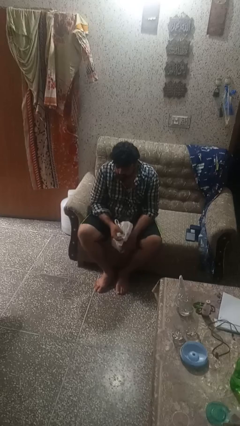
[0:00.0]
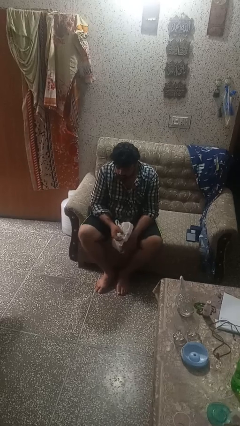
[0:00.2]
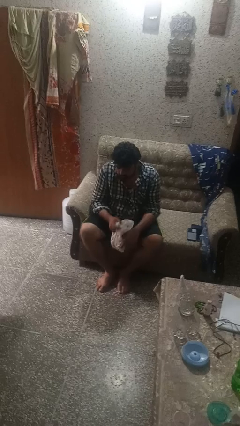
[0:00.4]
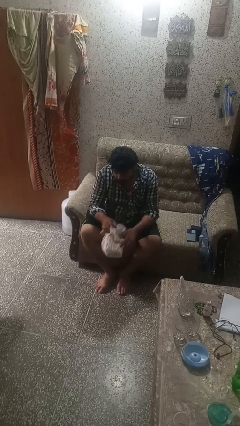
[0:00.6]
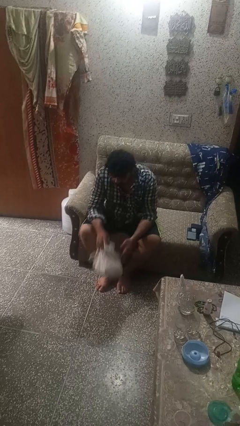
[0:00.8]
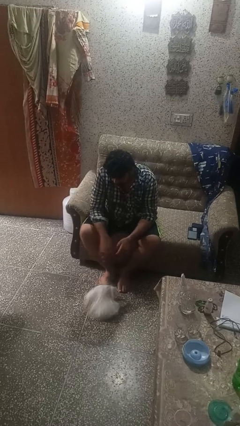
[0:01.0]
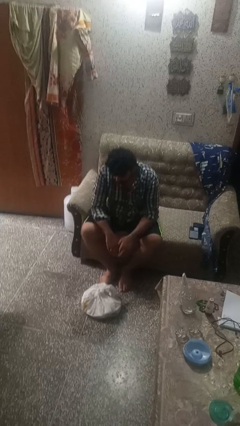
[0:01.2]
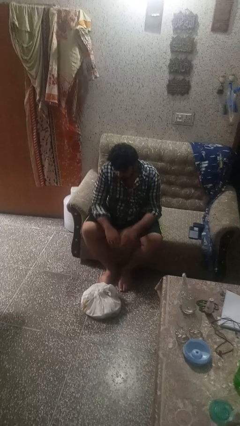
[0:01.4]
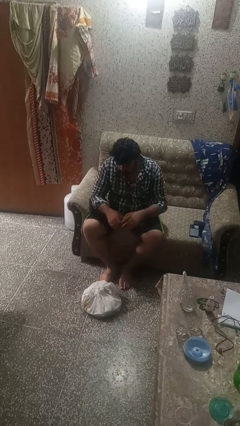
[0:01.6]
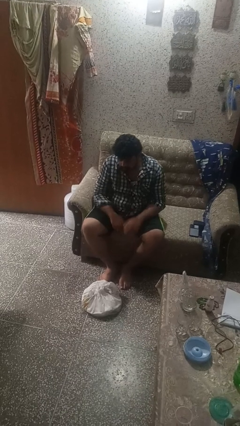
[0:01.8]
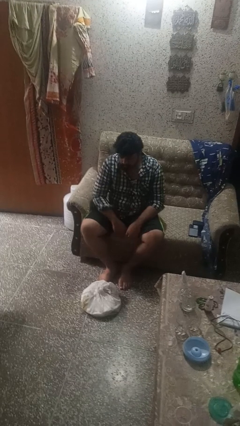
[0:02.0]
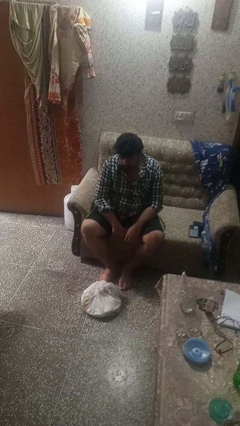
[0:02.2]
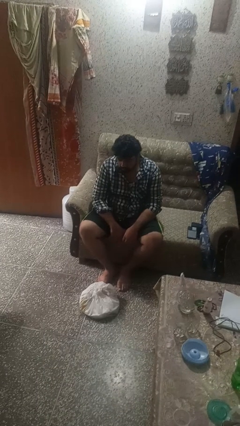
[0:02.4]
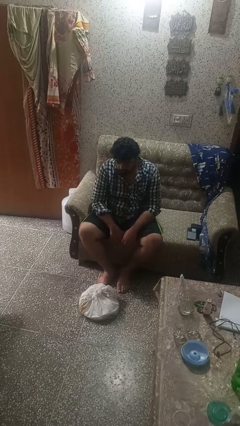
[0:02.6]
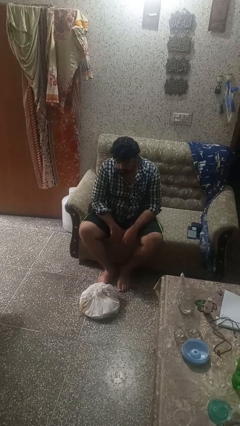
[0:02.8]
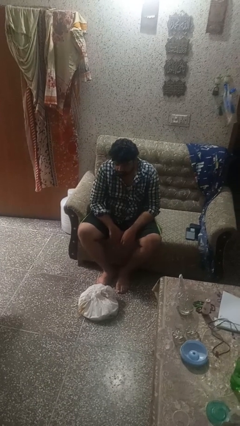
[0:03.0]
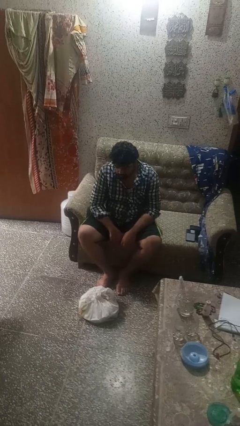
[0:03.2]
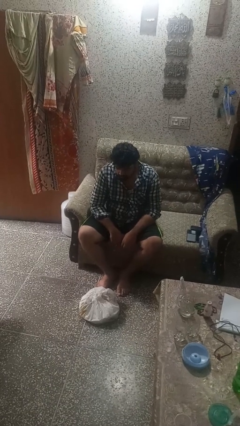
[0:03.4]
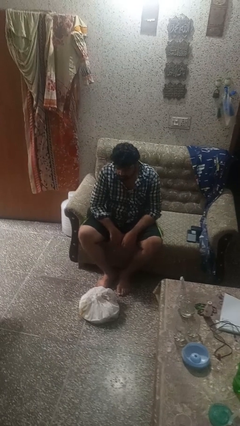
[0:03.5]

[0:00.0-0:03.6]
person throws object to ground

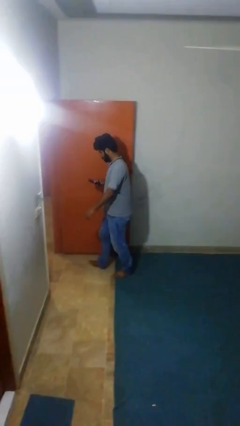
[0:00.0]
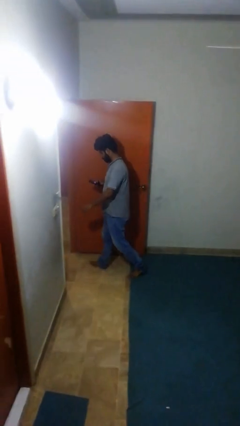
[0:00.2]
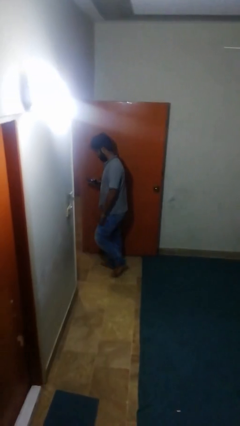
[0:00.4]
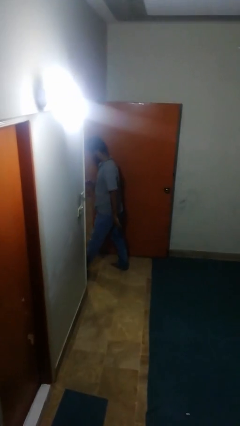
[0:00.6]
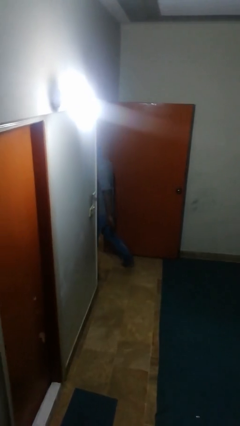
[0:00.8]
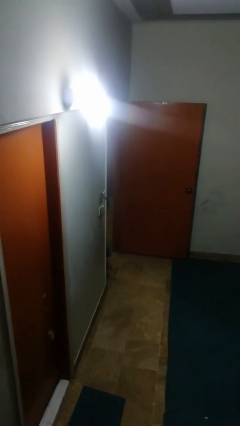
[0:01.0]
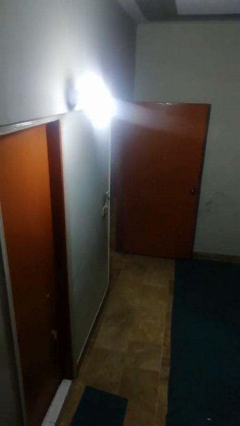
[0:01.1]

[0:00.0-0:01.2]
person exits scene through structure

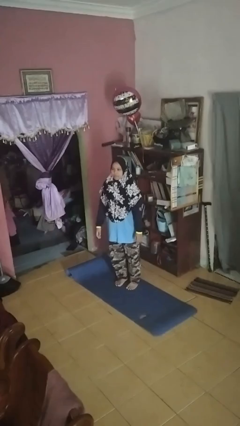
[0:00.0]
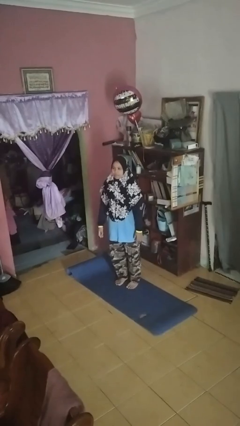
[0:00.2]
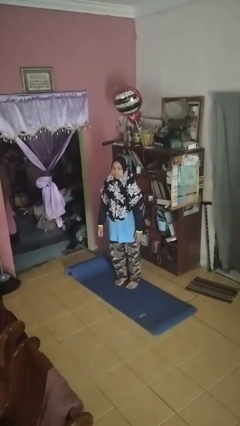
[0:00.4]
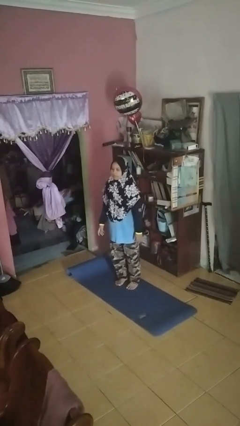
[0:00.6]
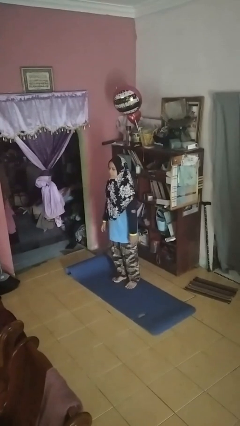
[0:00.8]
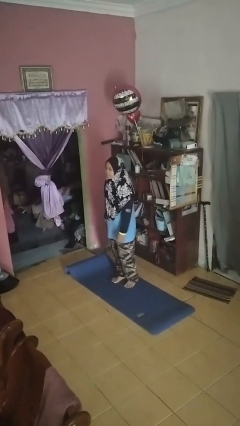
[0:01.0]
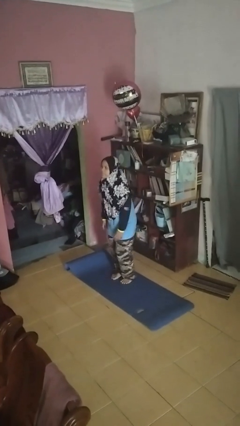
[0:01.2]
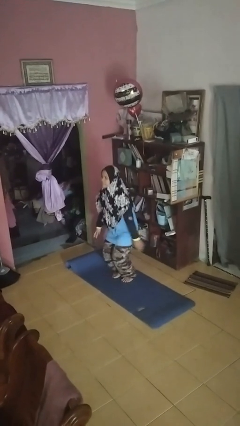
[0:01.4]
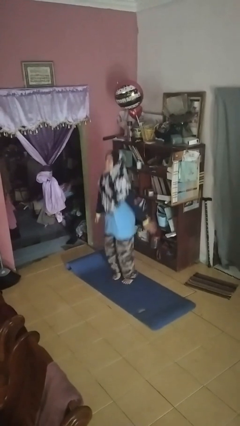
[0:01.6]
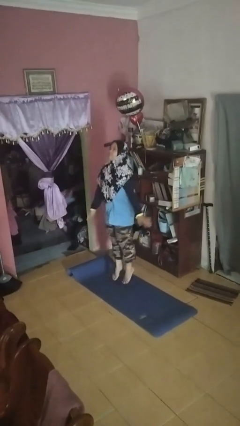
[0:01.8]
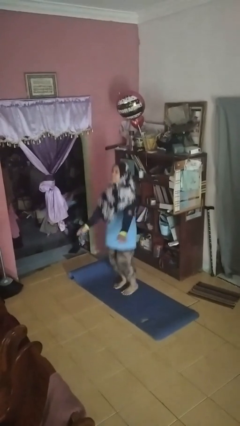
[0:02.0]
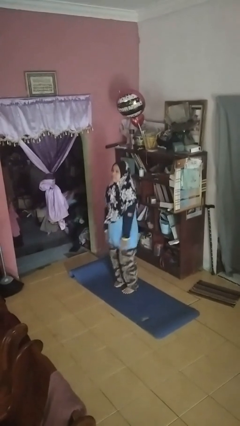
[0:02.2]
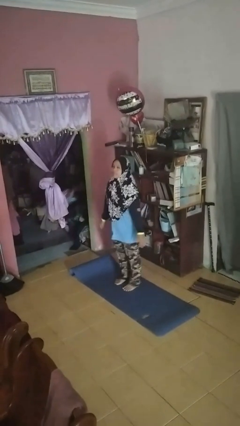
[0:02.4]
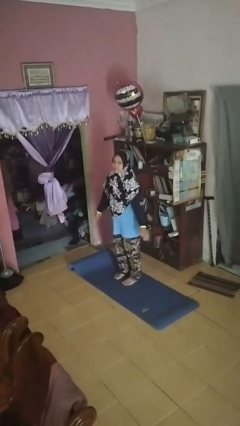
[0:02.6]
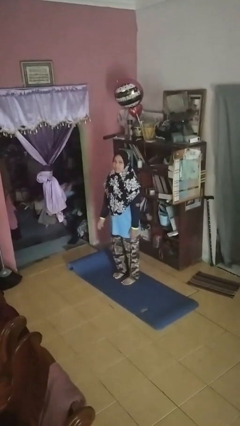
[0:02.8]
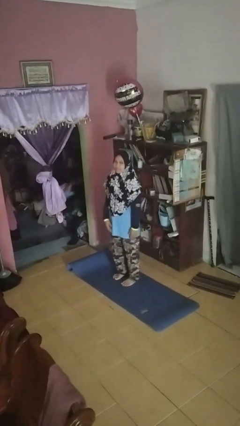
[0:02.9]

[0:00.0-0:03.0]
person jumps

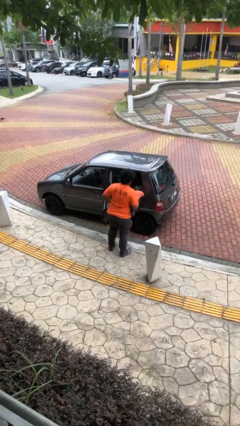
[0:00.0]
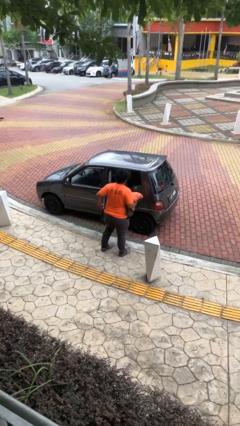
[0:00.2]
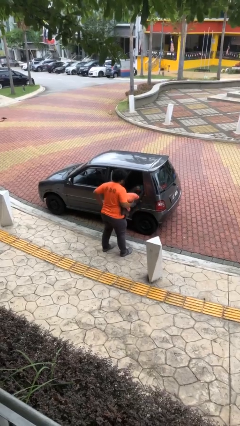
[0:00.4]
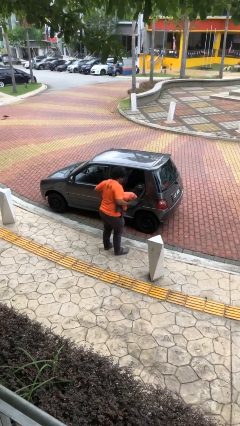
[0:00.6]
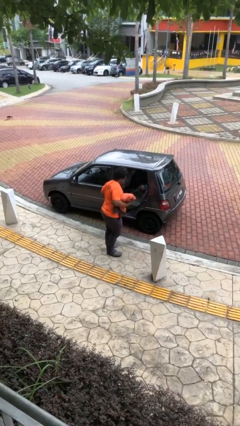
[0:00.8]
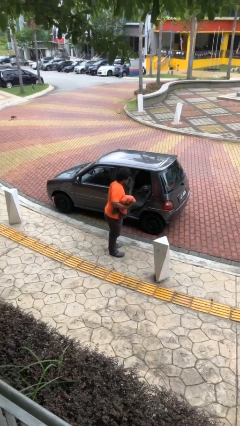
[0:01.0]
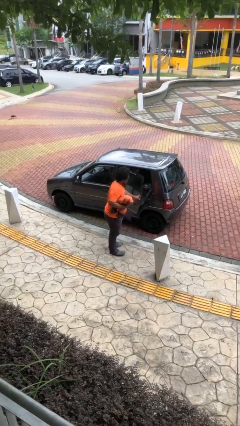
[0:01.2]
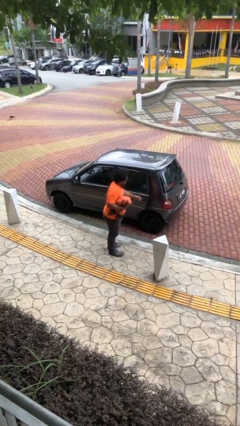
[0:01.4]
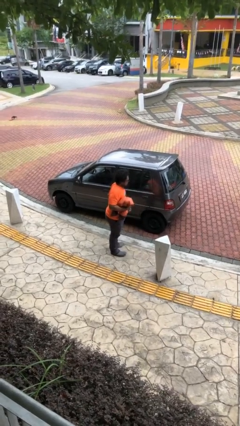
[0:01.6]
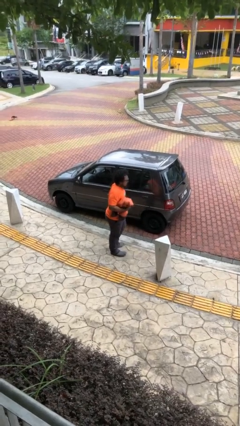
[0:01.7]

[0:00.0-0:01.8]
person closes car door

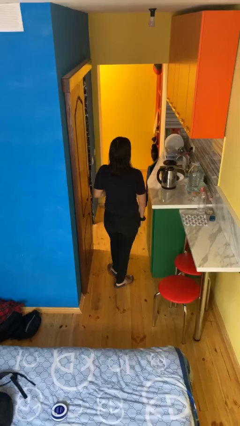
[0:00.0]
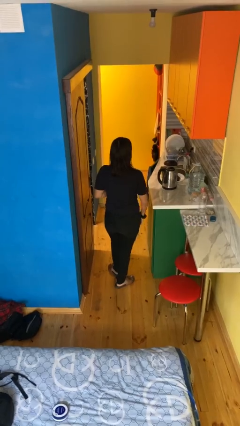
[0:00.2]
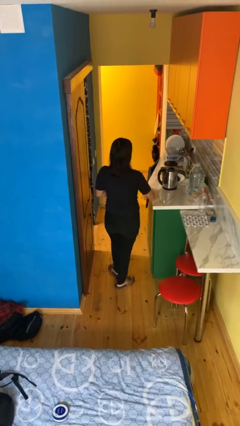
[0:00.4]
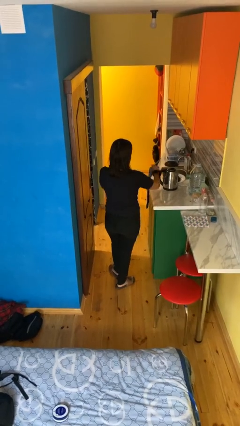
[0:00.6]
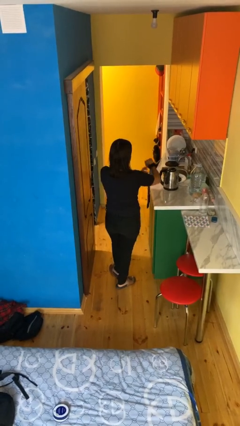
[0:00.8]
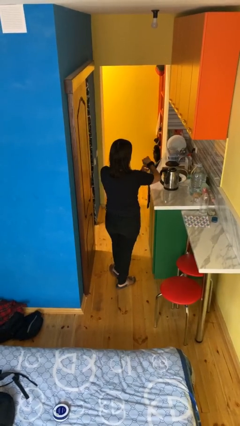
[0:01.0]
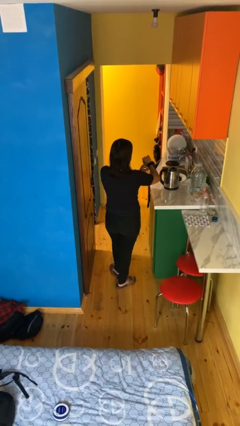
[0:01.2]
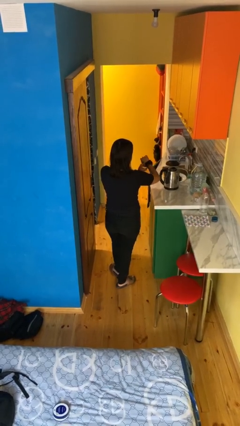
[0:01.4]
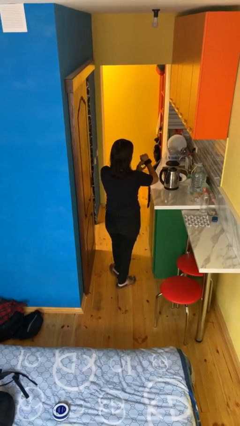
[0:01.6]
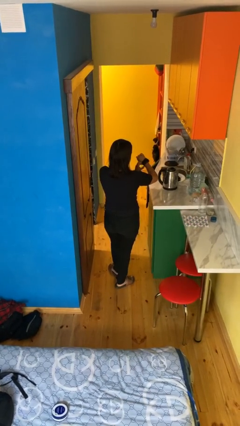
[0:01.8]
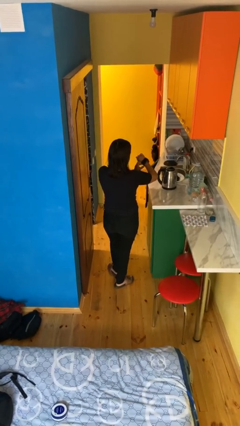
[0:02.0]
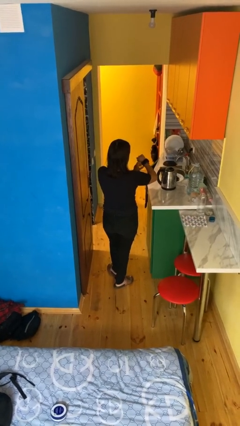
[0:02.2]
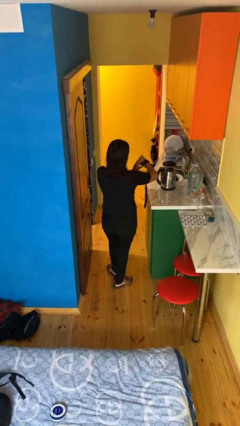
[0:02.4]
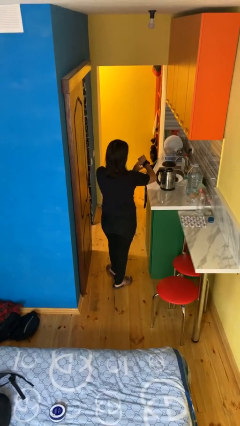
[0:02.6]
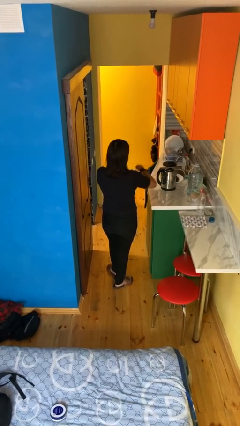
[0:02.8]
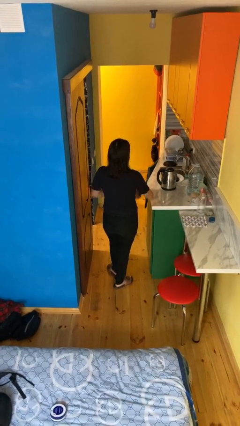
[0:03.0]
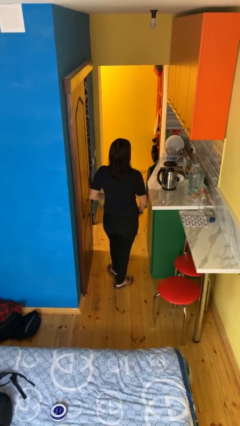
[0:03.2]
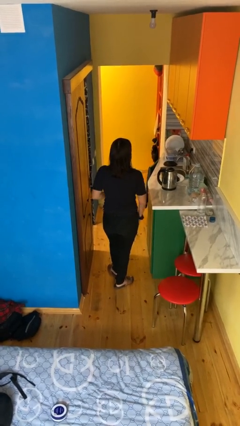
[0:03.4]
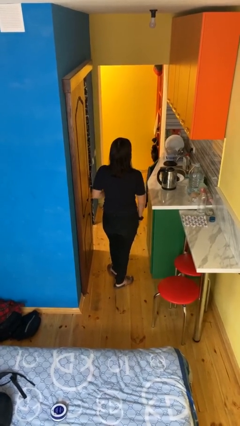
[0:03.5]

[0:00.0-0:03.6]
person looks at wristwatch

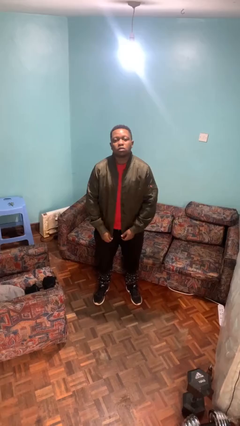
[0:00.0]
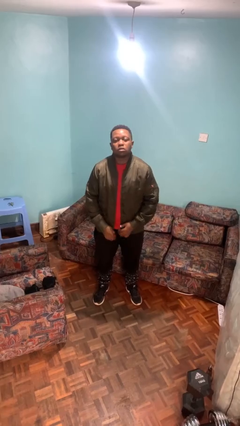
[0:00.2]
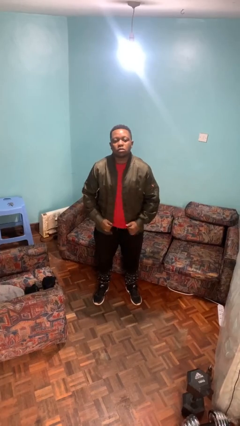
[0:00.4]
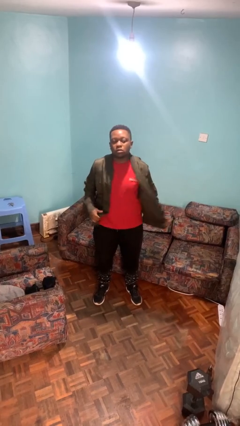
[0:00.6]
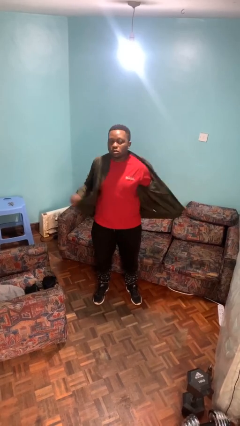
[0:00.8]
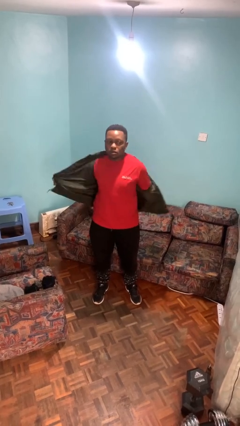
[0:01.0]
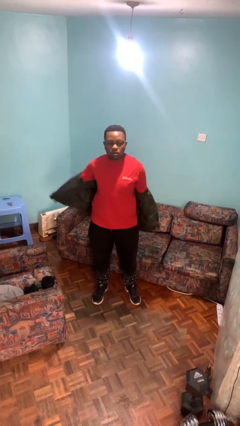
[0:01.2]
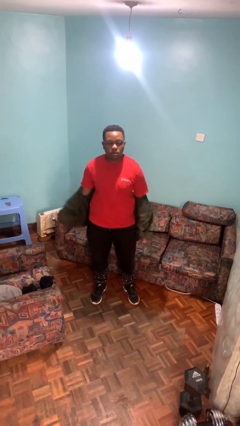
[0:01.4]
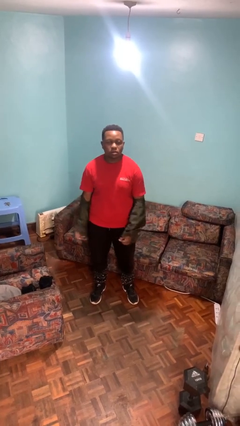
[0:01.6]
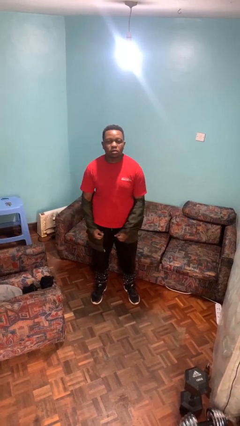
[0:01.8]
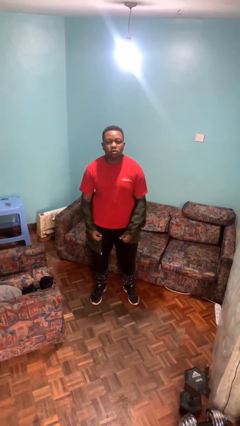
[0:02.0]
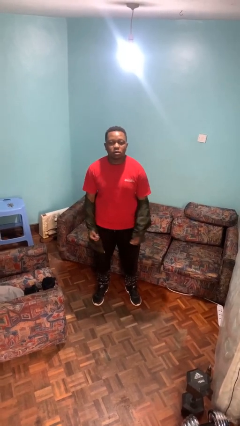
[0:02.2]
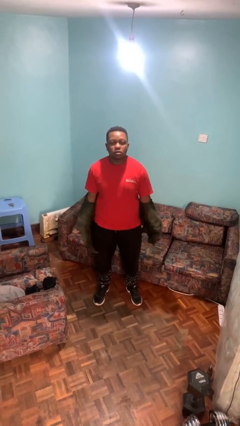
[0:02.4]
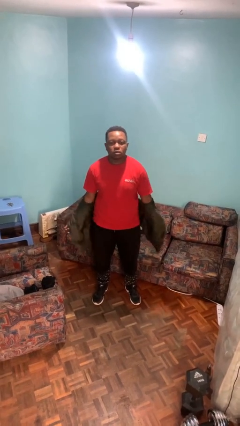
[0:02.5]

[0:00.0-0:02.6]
person takes off jacket

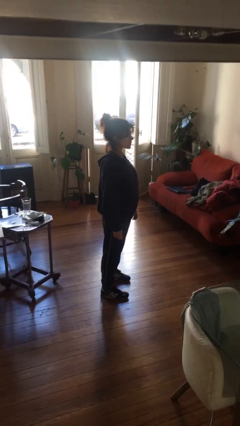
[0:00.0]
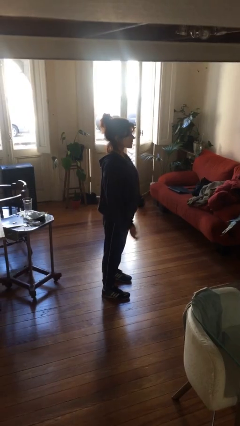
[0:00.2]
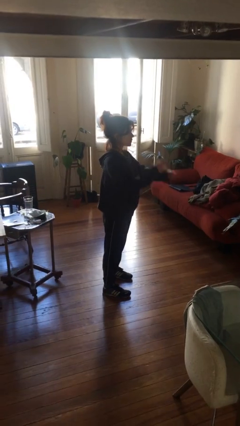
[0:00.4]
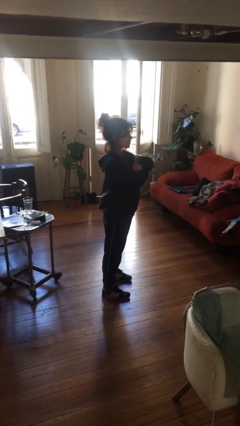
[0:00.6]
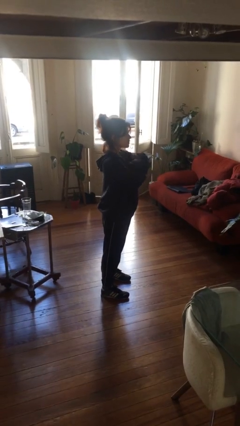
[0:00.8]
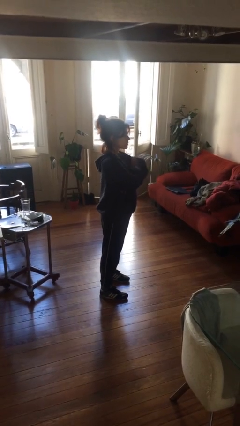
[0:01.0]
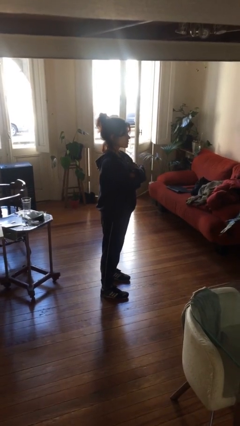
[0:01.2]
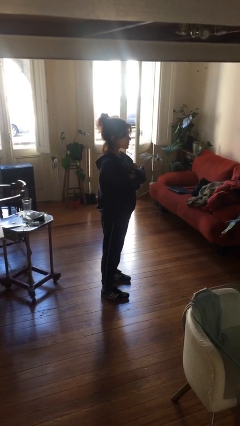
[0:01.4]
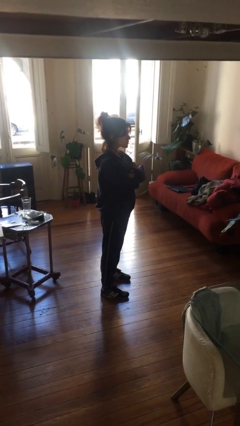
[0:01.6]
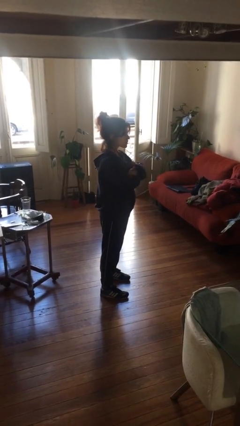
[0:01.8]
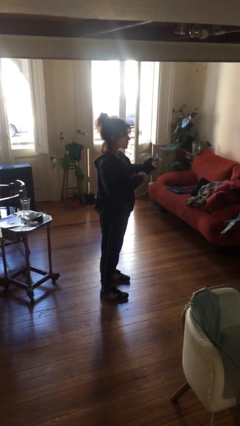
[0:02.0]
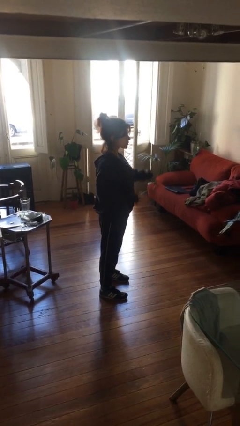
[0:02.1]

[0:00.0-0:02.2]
person crosses arms
